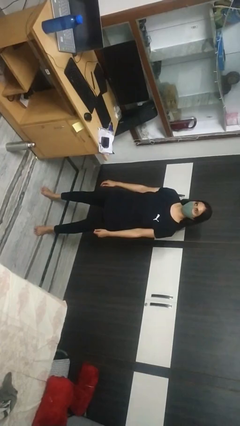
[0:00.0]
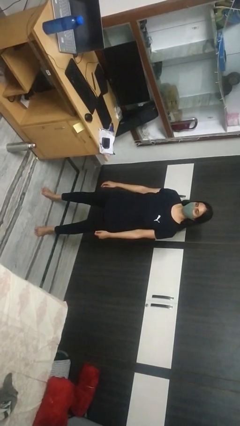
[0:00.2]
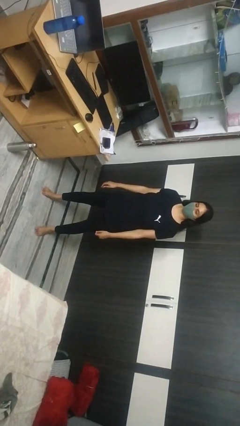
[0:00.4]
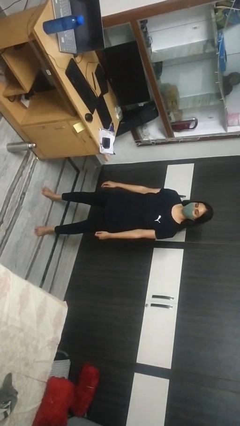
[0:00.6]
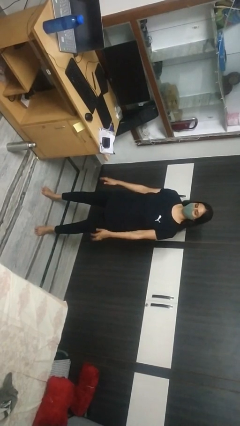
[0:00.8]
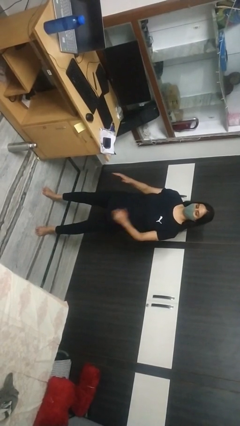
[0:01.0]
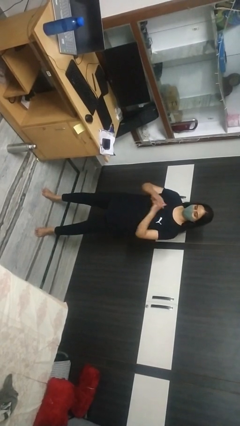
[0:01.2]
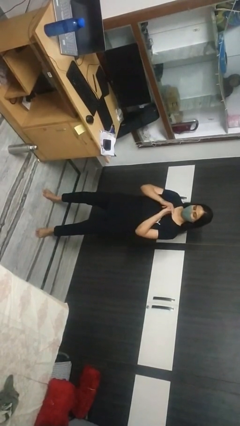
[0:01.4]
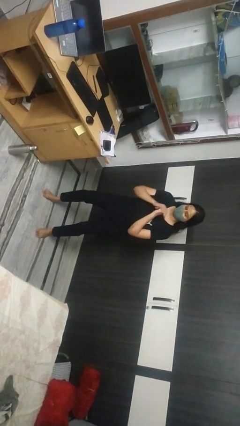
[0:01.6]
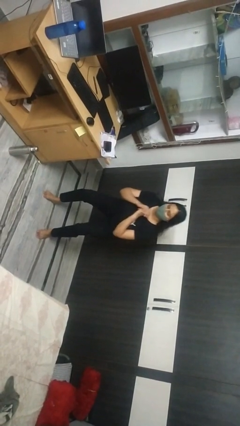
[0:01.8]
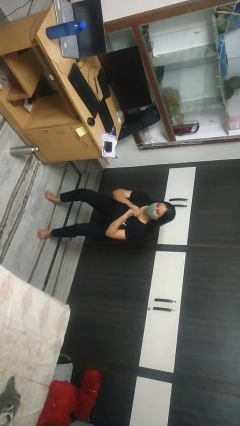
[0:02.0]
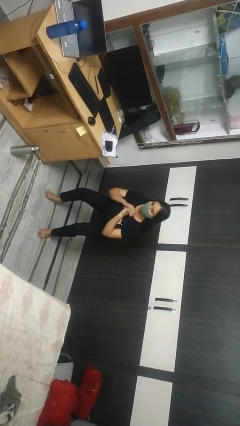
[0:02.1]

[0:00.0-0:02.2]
person squats

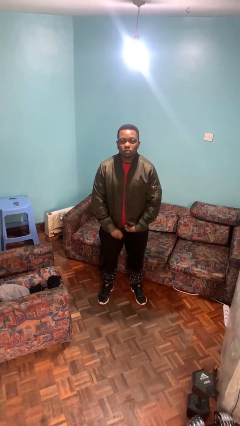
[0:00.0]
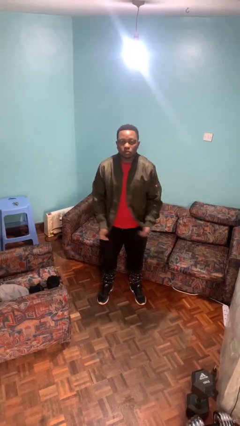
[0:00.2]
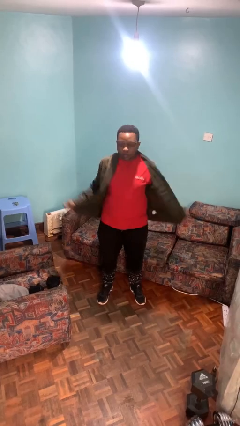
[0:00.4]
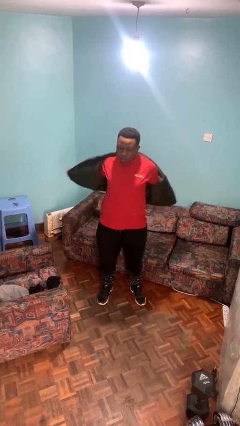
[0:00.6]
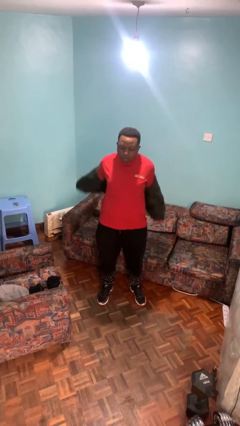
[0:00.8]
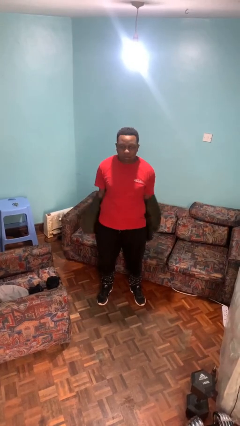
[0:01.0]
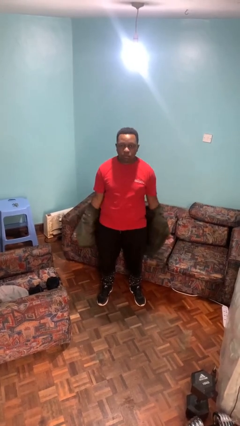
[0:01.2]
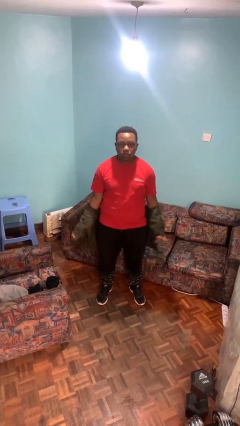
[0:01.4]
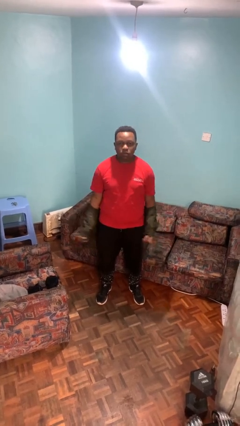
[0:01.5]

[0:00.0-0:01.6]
person takes off jacket

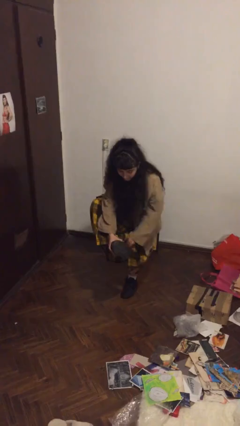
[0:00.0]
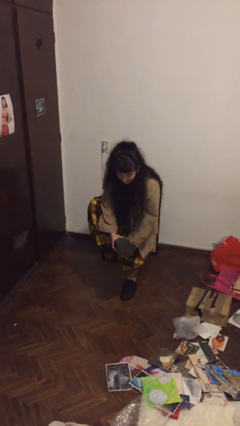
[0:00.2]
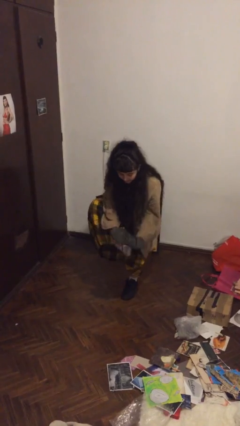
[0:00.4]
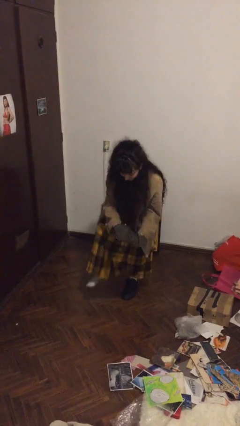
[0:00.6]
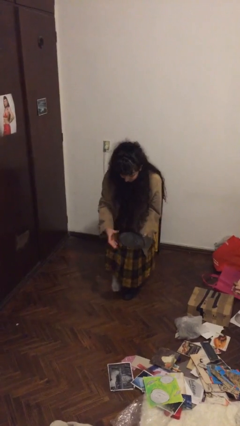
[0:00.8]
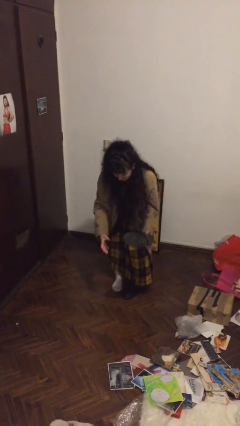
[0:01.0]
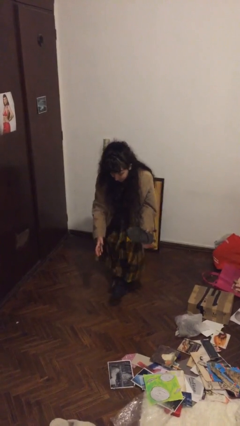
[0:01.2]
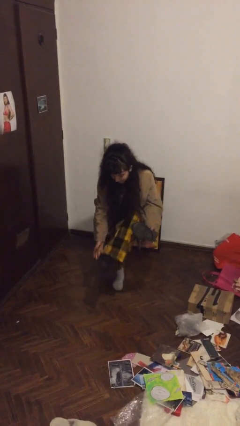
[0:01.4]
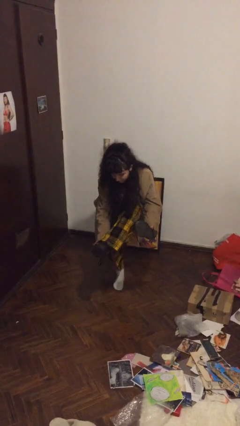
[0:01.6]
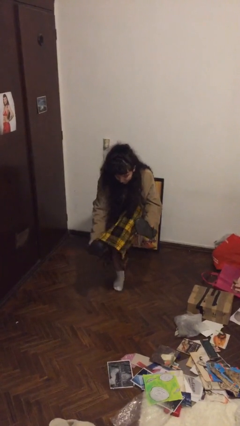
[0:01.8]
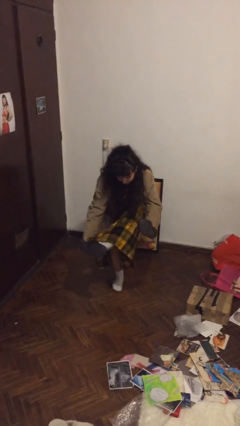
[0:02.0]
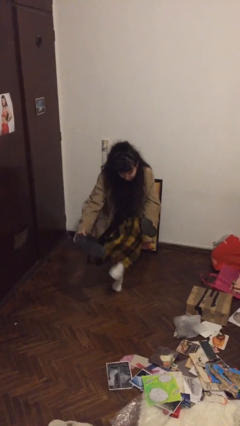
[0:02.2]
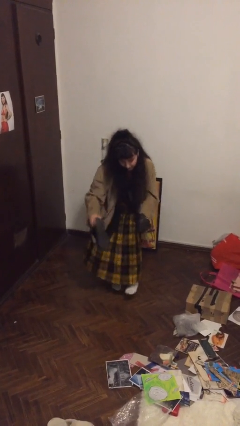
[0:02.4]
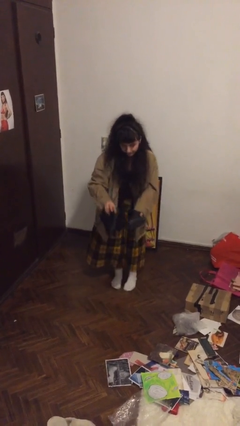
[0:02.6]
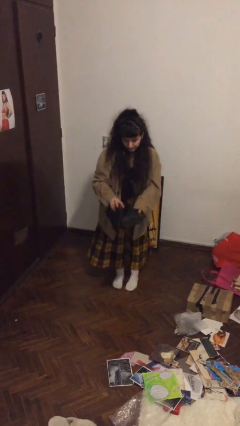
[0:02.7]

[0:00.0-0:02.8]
person takes off shoes

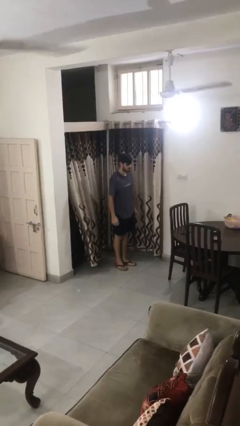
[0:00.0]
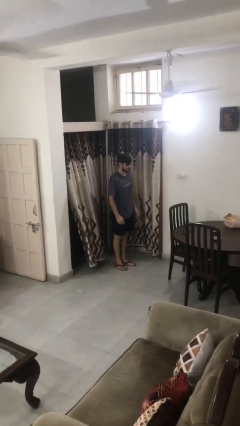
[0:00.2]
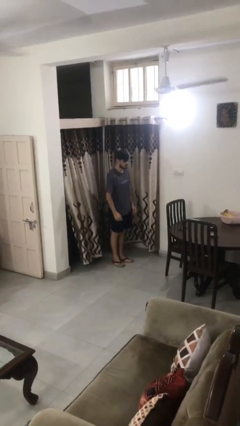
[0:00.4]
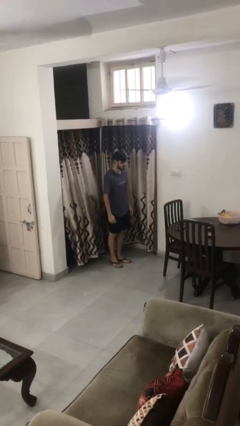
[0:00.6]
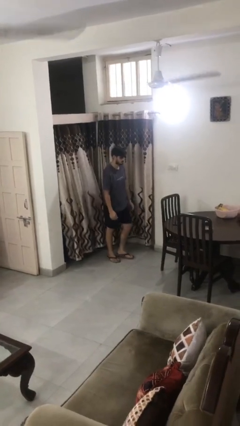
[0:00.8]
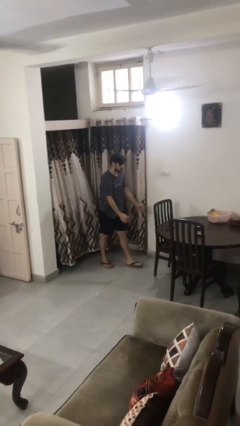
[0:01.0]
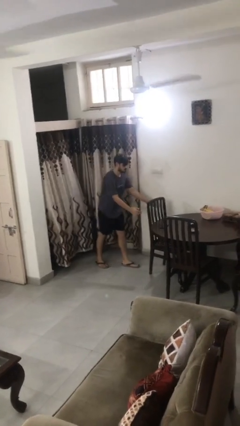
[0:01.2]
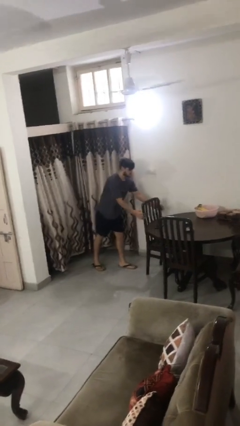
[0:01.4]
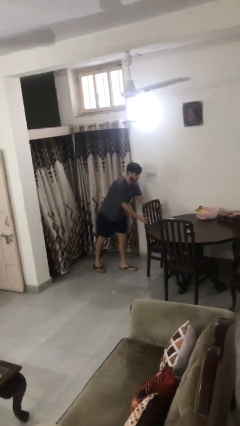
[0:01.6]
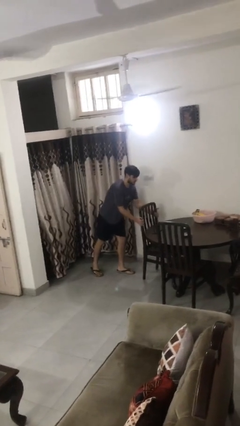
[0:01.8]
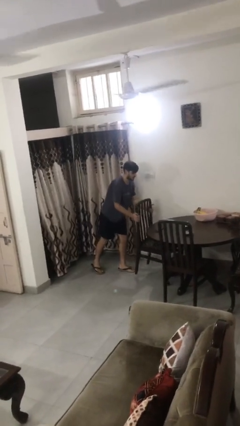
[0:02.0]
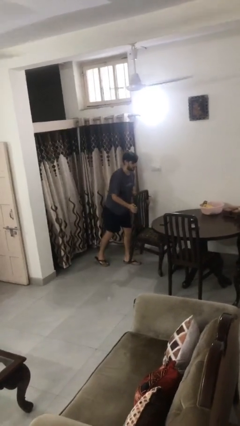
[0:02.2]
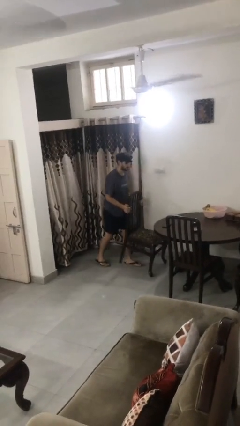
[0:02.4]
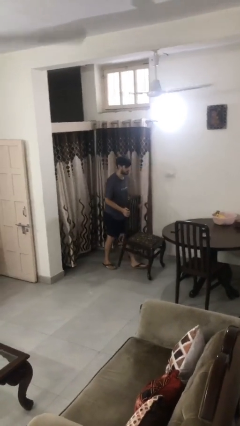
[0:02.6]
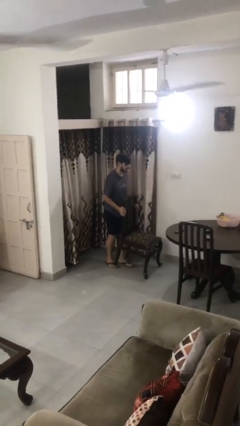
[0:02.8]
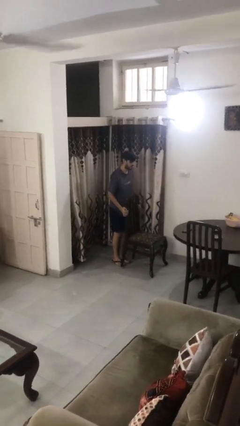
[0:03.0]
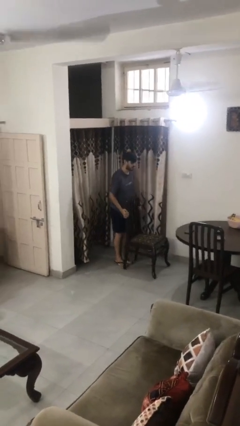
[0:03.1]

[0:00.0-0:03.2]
person pulls out chair

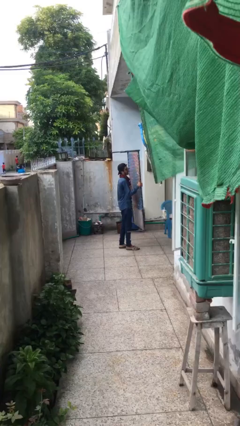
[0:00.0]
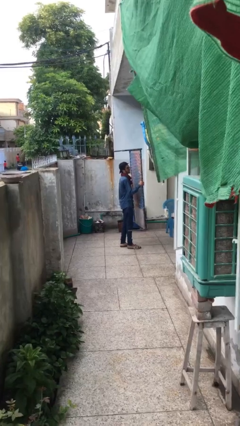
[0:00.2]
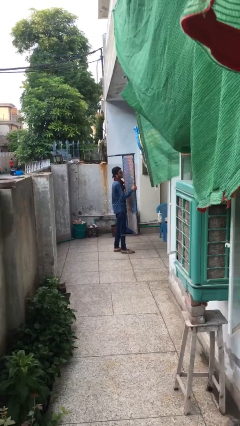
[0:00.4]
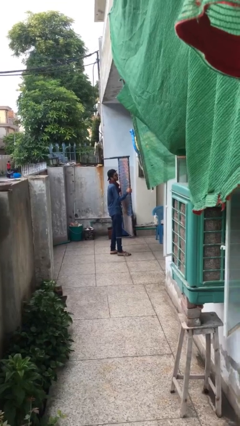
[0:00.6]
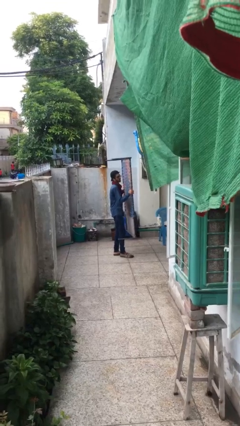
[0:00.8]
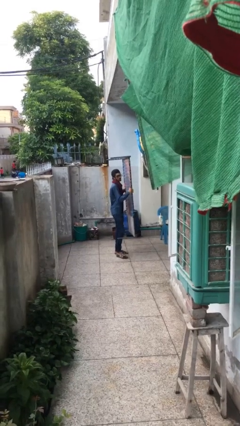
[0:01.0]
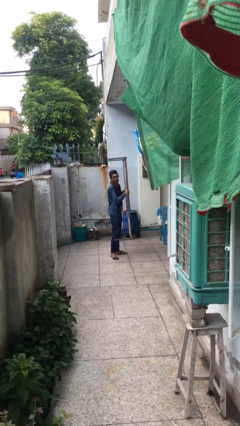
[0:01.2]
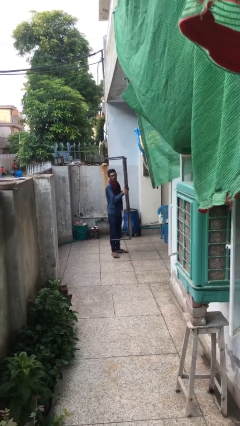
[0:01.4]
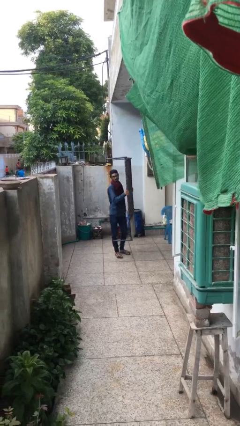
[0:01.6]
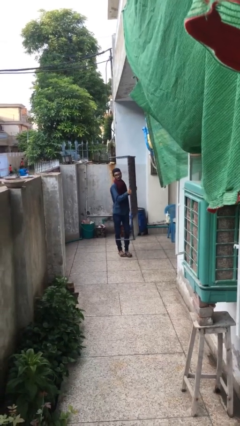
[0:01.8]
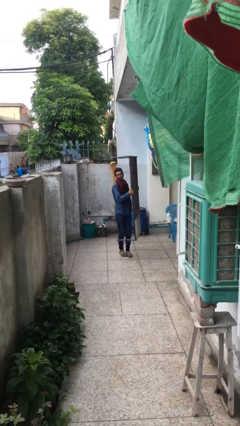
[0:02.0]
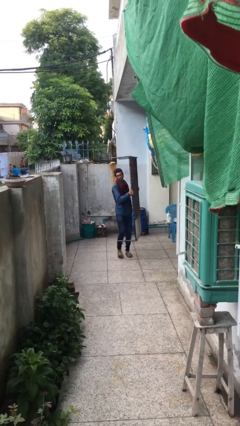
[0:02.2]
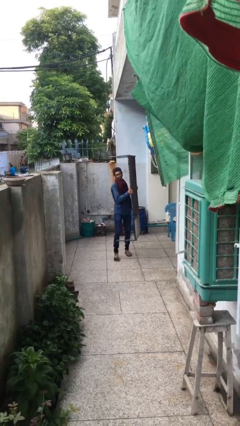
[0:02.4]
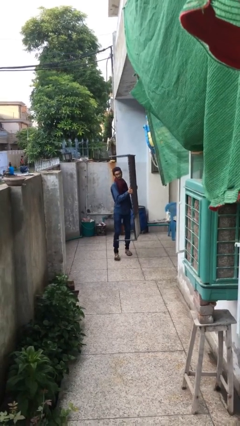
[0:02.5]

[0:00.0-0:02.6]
person carries heavy object

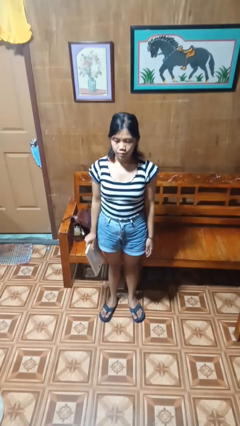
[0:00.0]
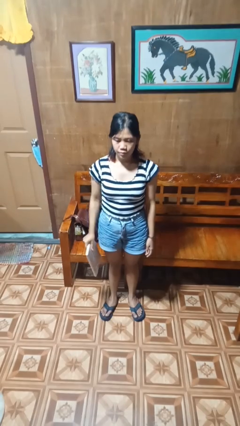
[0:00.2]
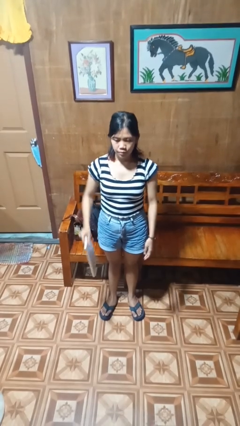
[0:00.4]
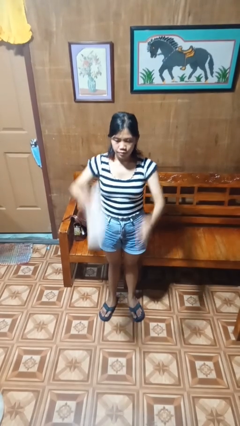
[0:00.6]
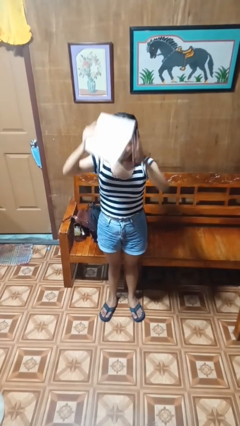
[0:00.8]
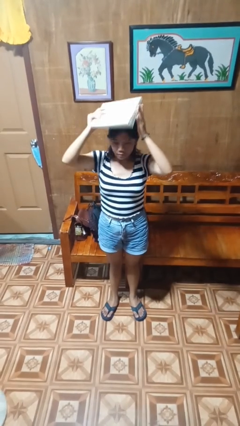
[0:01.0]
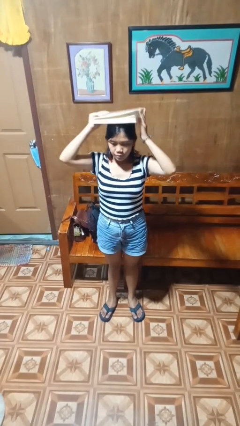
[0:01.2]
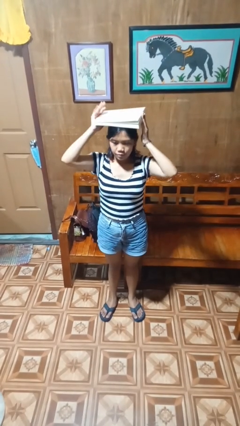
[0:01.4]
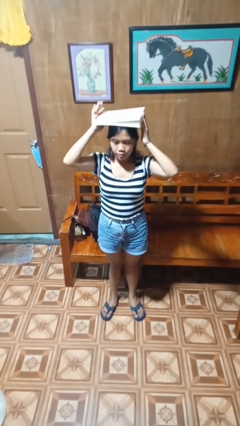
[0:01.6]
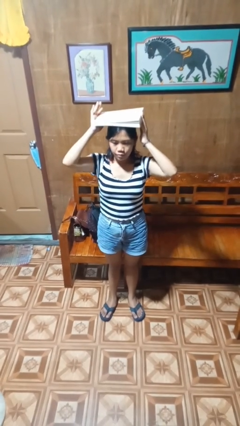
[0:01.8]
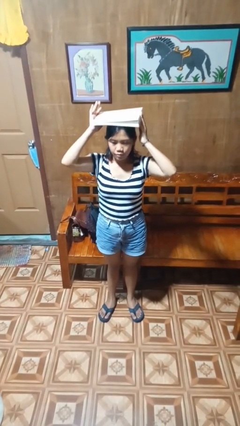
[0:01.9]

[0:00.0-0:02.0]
person holds object above head

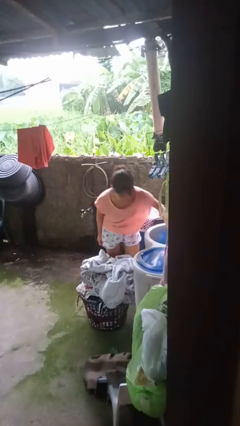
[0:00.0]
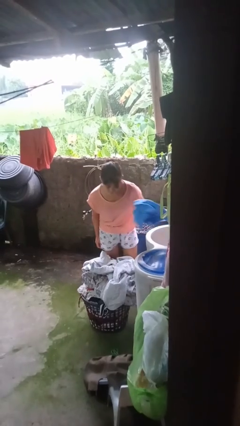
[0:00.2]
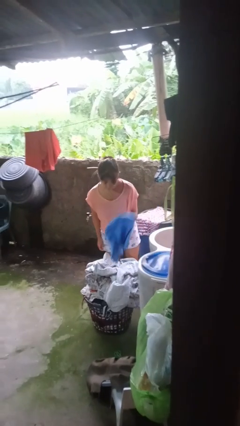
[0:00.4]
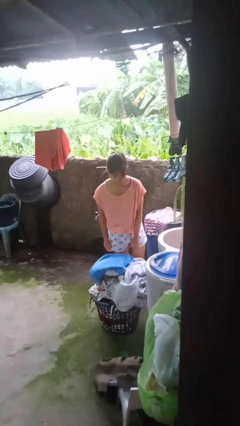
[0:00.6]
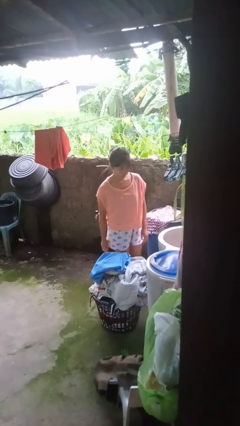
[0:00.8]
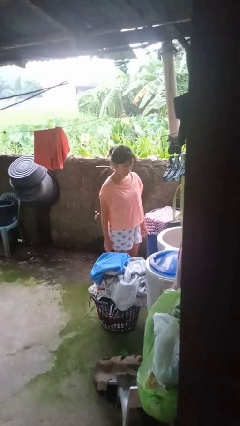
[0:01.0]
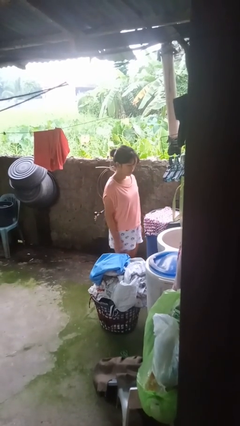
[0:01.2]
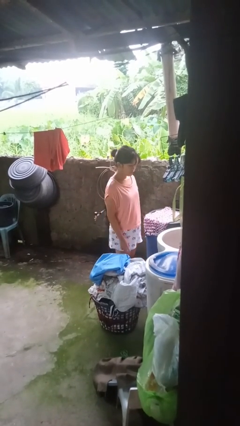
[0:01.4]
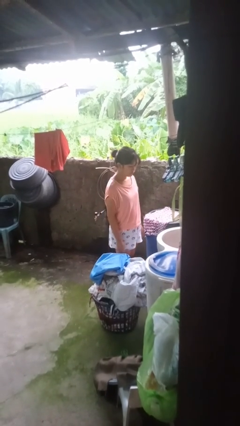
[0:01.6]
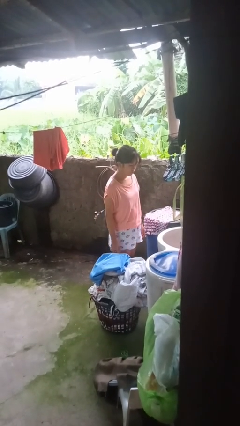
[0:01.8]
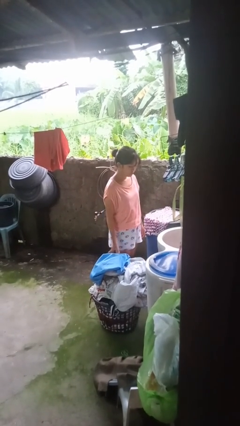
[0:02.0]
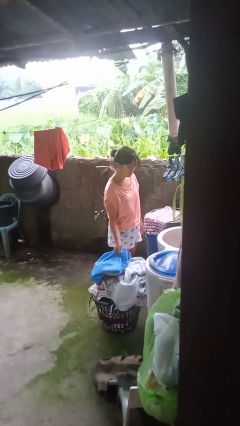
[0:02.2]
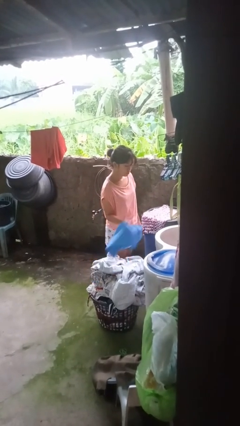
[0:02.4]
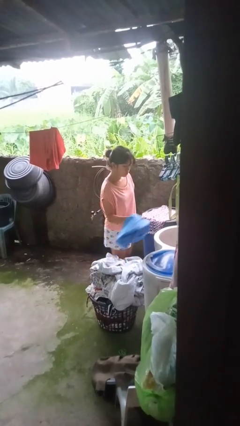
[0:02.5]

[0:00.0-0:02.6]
person unloads clotheswasher

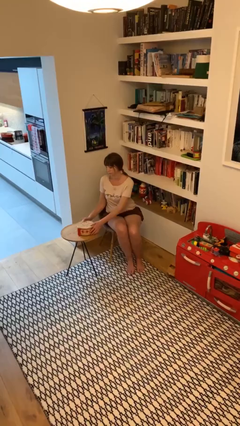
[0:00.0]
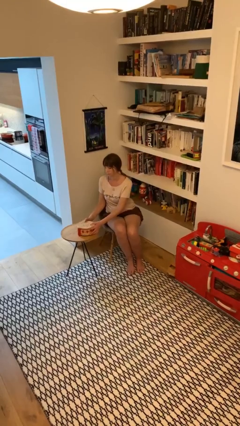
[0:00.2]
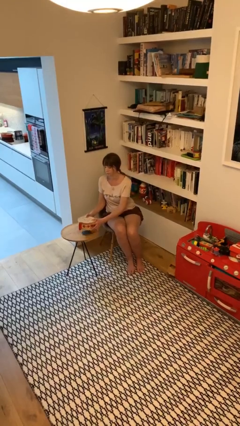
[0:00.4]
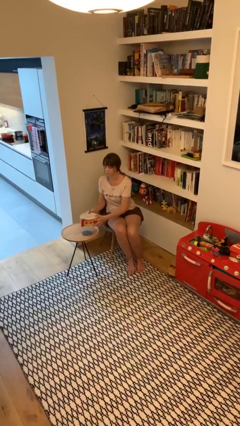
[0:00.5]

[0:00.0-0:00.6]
person picks up object from table
